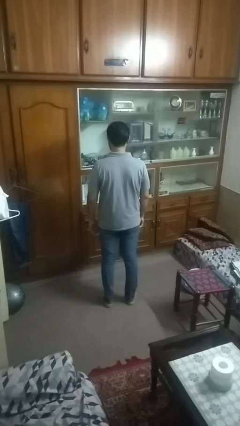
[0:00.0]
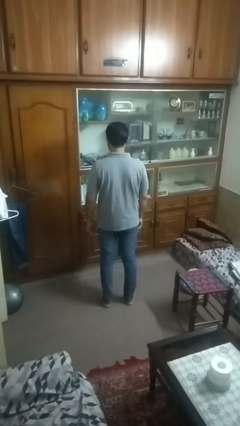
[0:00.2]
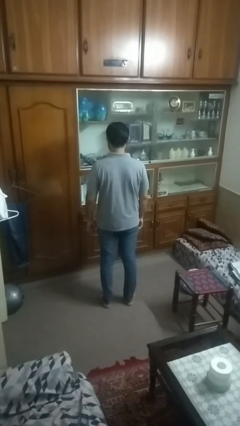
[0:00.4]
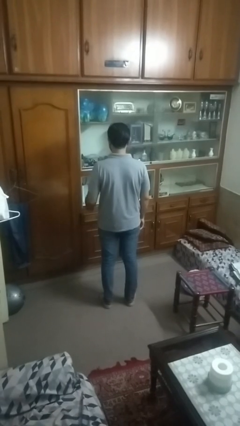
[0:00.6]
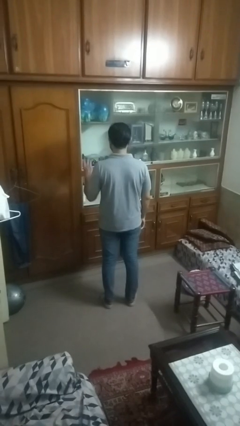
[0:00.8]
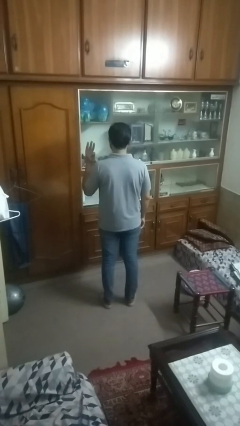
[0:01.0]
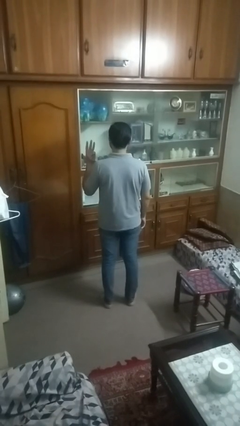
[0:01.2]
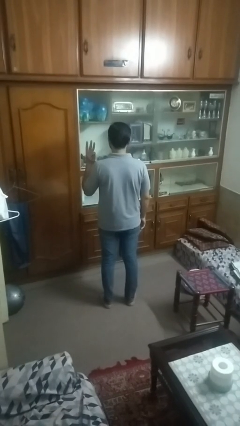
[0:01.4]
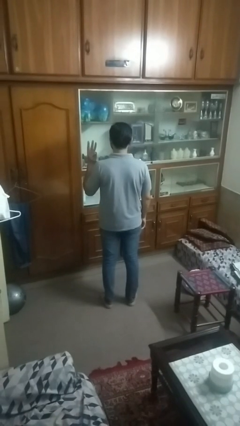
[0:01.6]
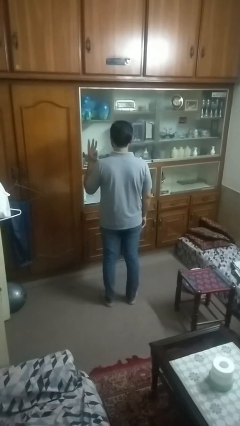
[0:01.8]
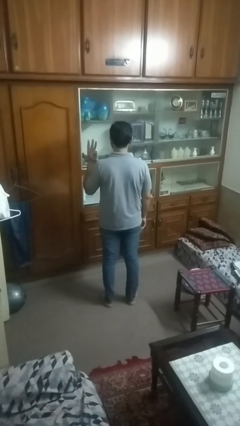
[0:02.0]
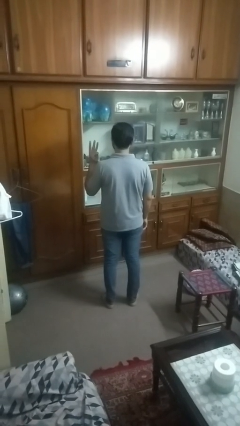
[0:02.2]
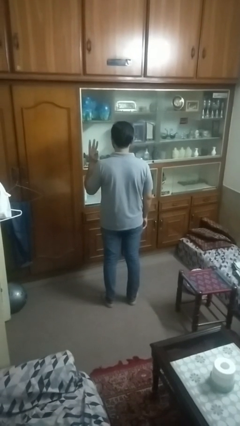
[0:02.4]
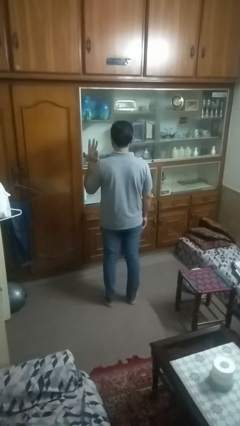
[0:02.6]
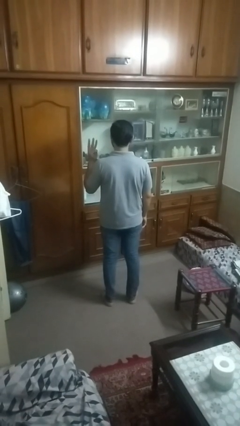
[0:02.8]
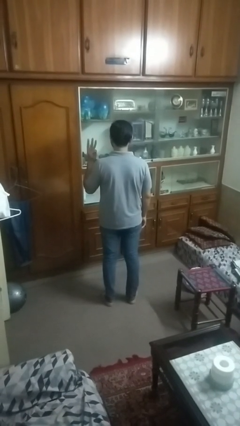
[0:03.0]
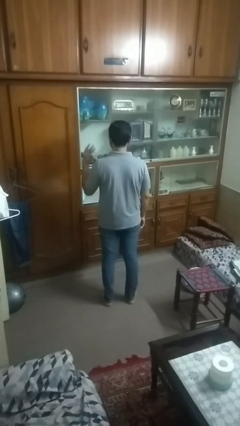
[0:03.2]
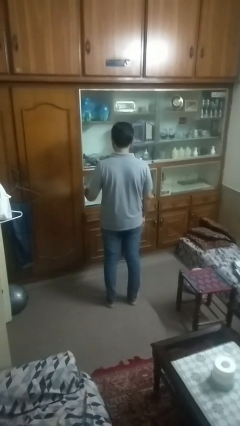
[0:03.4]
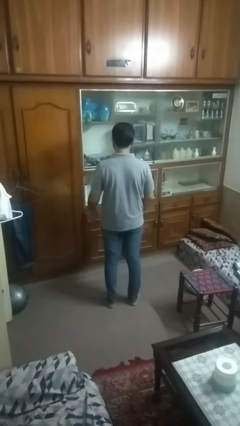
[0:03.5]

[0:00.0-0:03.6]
person gestures number three

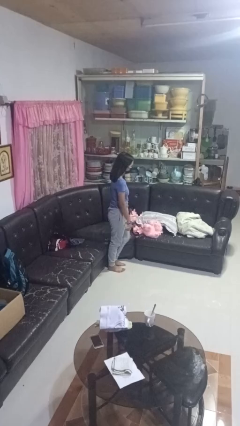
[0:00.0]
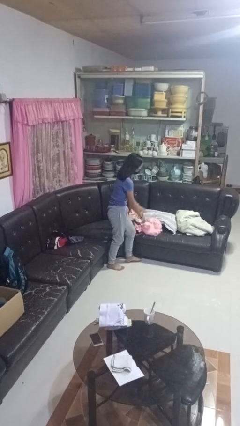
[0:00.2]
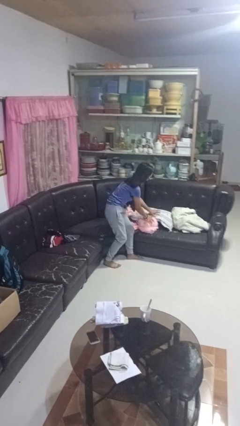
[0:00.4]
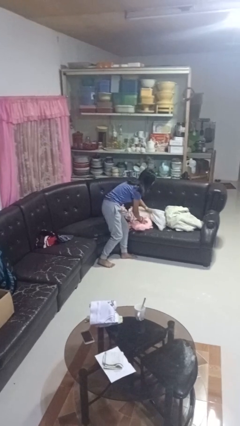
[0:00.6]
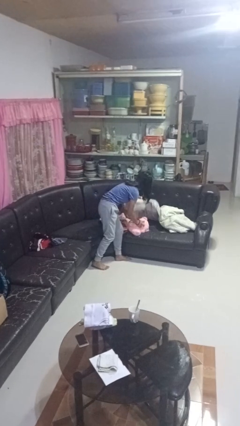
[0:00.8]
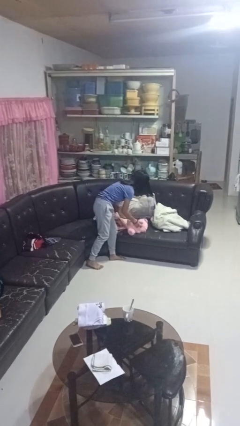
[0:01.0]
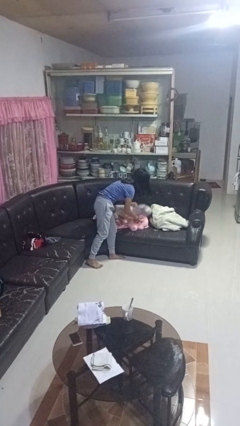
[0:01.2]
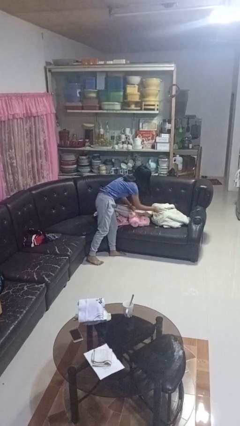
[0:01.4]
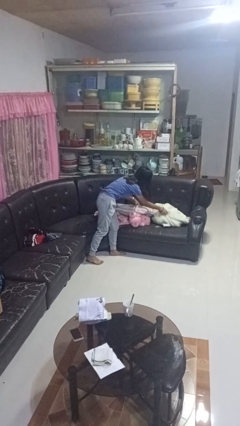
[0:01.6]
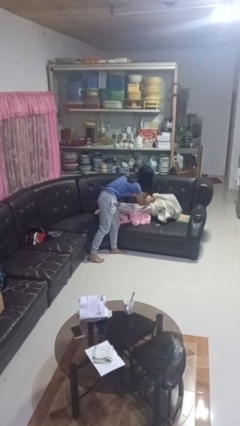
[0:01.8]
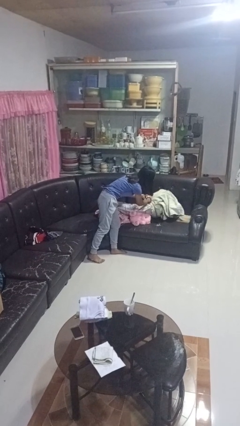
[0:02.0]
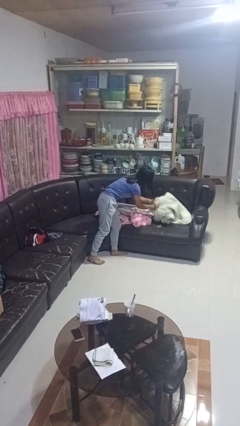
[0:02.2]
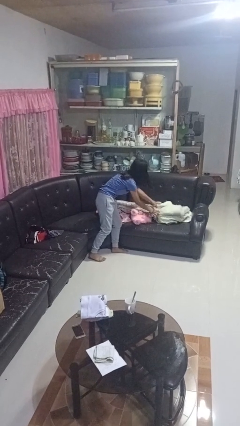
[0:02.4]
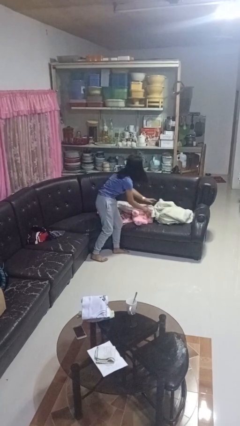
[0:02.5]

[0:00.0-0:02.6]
person searches in couch

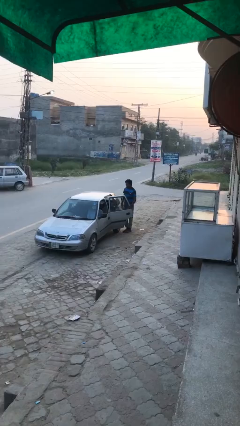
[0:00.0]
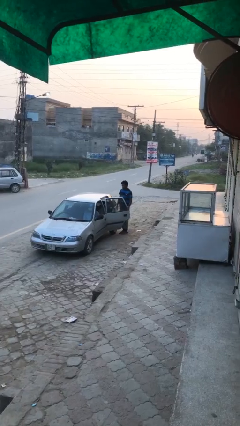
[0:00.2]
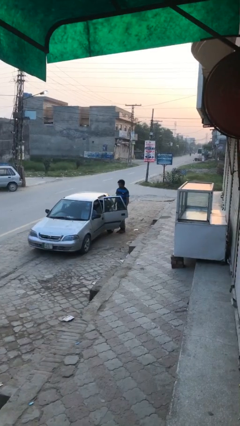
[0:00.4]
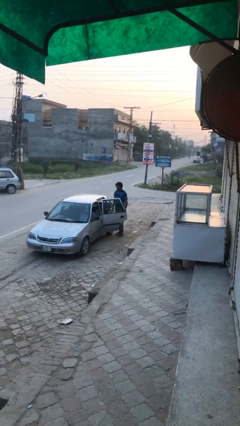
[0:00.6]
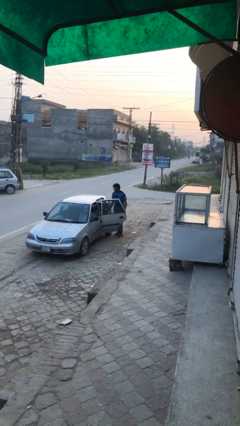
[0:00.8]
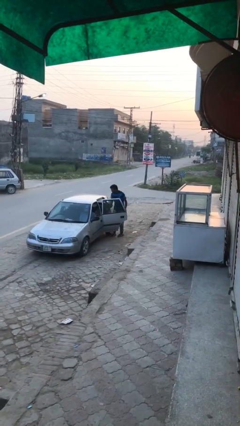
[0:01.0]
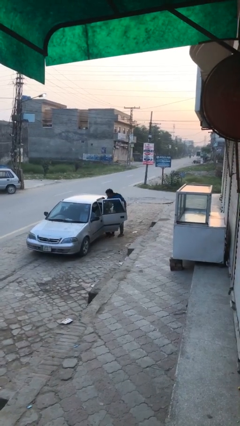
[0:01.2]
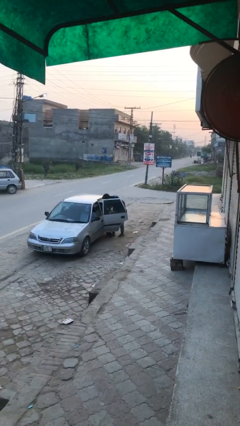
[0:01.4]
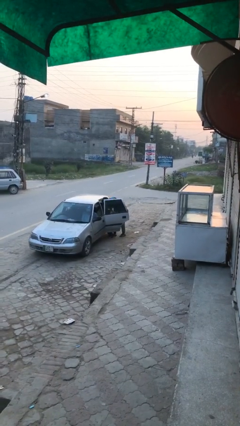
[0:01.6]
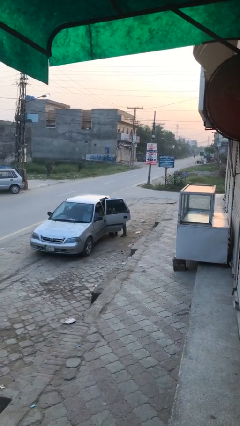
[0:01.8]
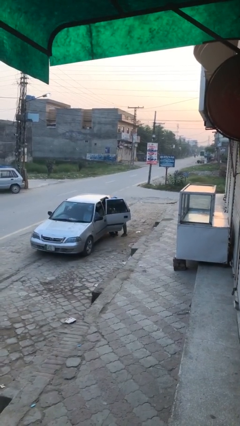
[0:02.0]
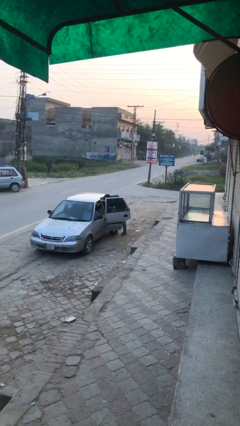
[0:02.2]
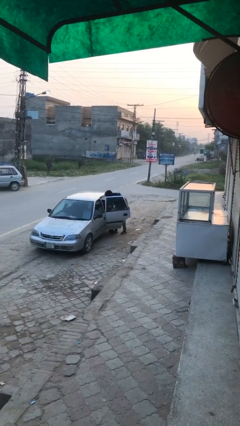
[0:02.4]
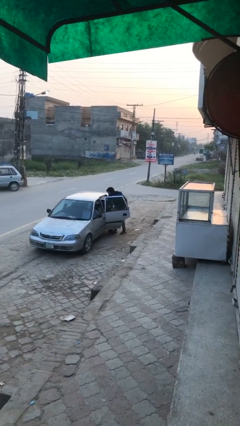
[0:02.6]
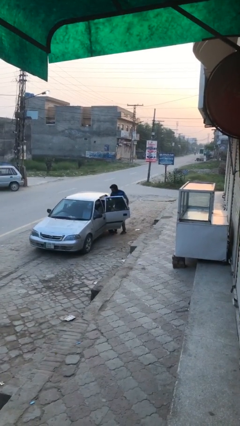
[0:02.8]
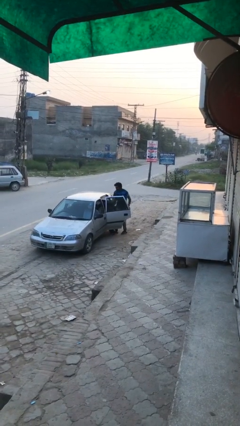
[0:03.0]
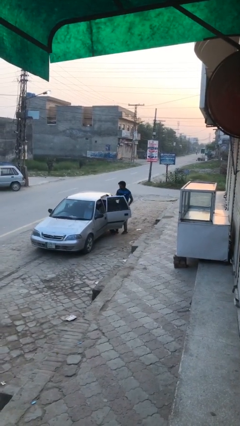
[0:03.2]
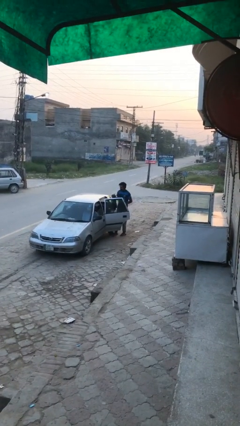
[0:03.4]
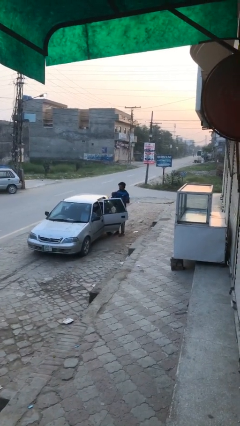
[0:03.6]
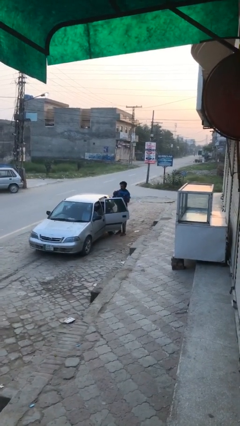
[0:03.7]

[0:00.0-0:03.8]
person unloads car

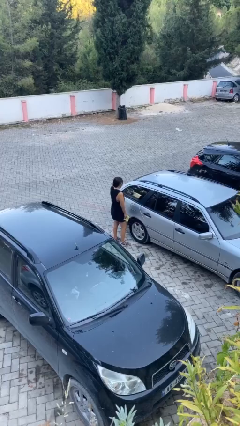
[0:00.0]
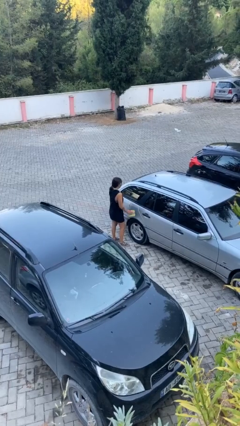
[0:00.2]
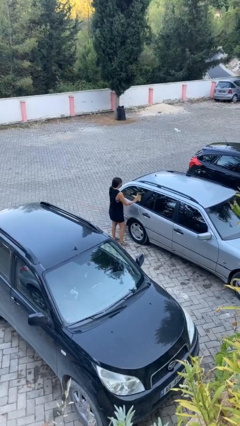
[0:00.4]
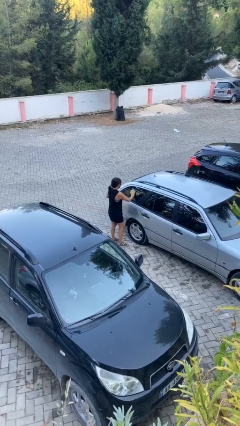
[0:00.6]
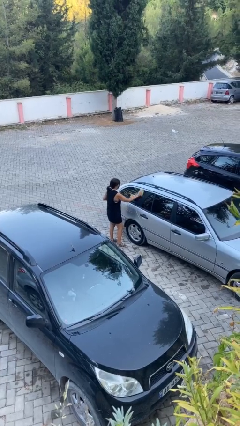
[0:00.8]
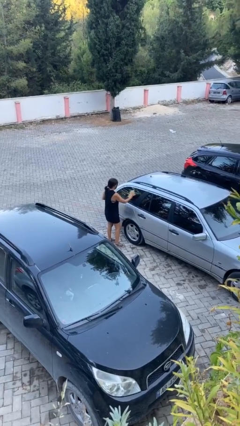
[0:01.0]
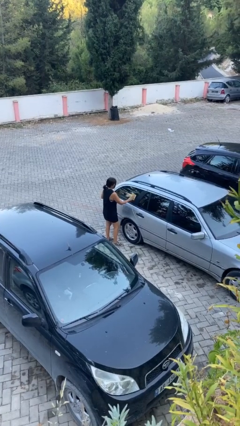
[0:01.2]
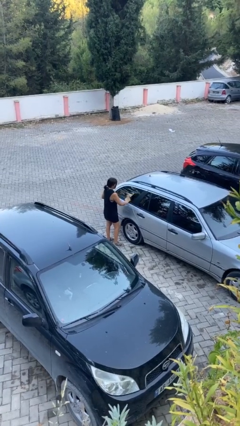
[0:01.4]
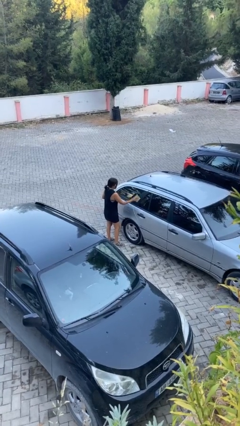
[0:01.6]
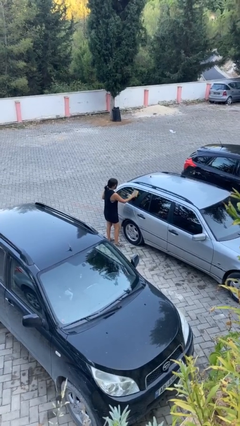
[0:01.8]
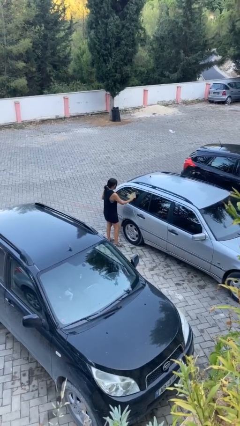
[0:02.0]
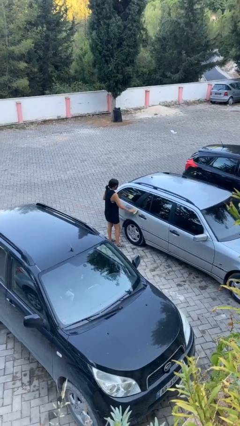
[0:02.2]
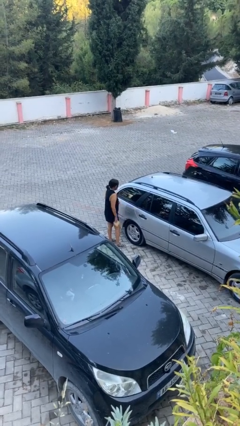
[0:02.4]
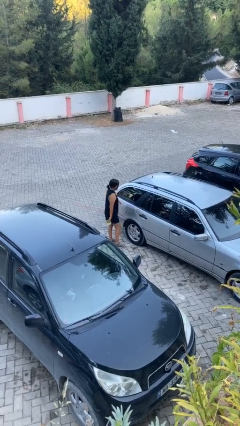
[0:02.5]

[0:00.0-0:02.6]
person polishes car with rag

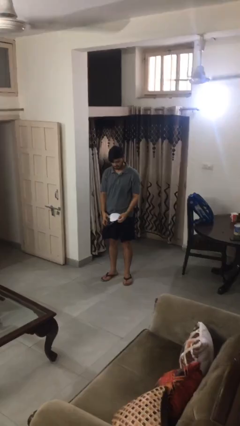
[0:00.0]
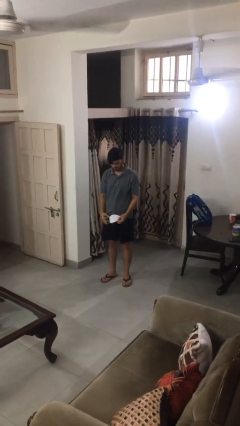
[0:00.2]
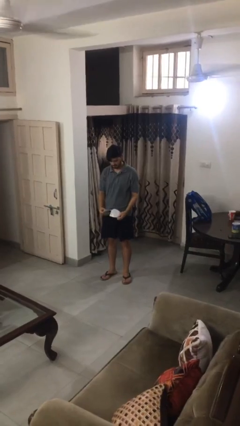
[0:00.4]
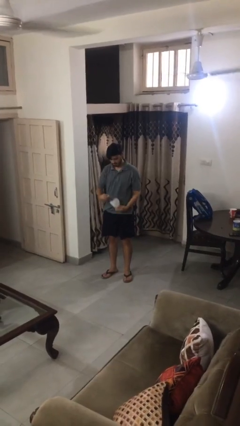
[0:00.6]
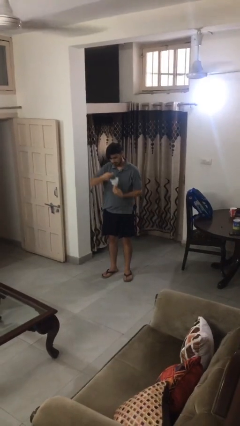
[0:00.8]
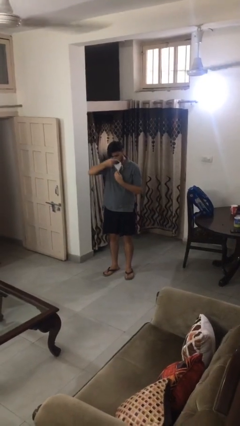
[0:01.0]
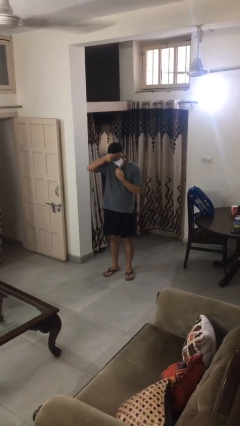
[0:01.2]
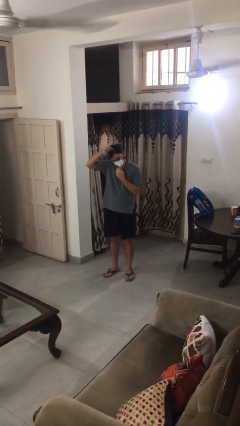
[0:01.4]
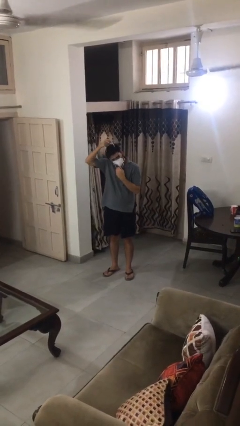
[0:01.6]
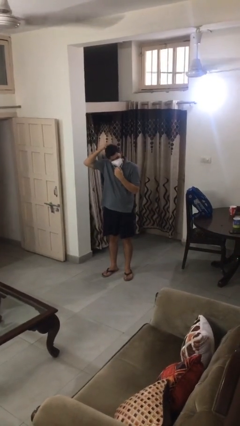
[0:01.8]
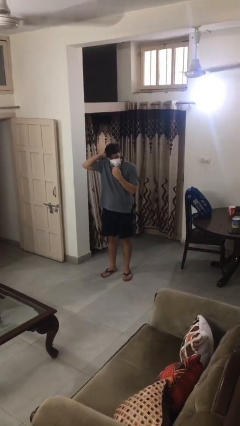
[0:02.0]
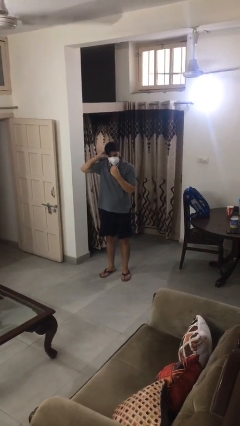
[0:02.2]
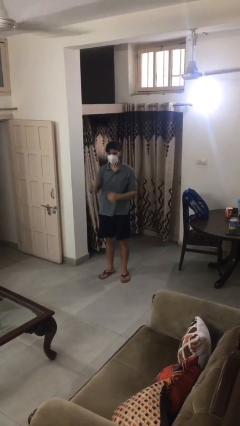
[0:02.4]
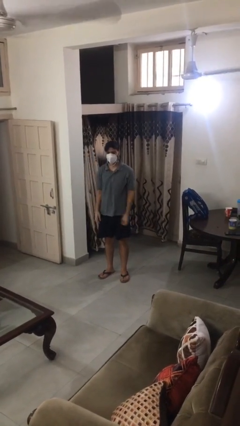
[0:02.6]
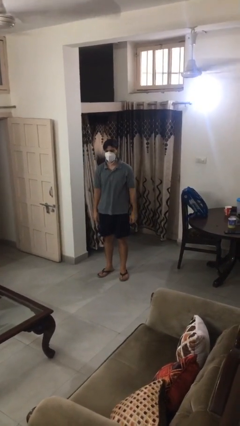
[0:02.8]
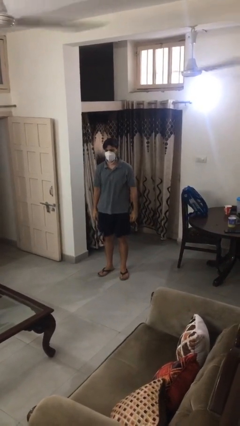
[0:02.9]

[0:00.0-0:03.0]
person puts on facemask

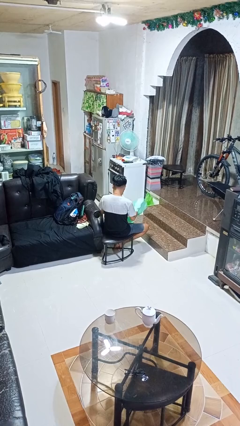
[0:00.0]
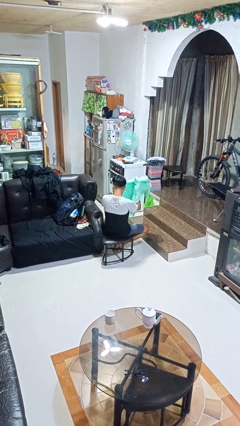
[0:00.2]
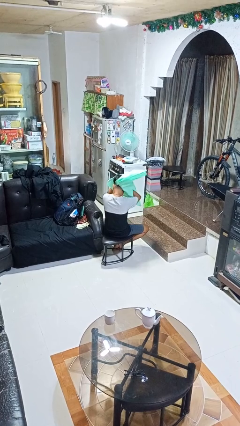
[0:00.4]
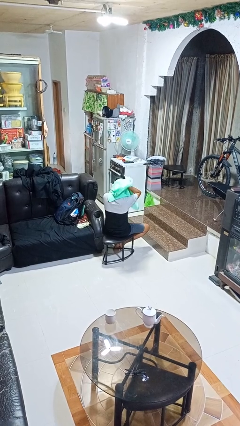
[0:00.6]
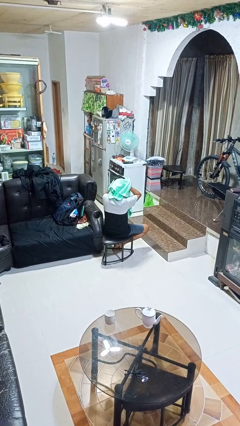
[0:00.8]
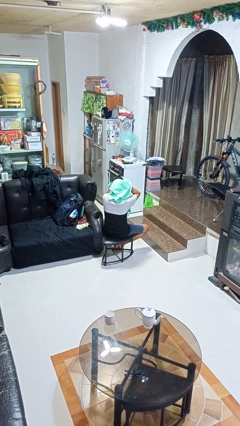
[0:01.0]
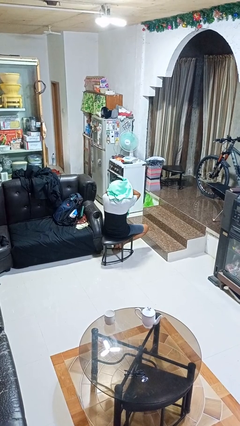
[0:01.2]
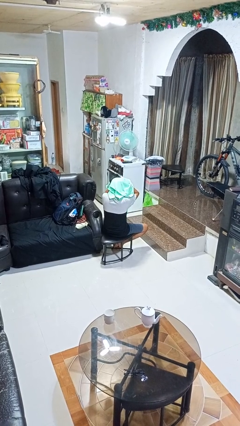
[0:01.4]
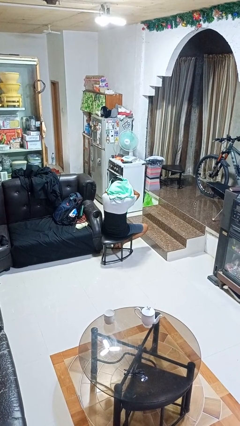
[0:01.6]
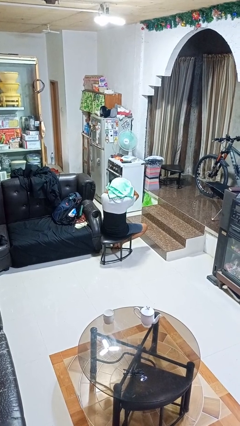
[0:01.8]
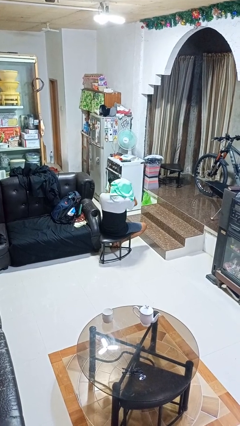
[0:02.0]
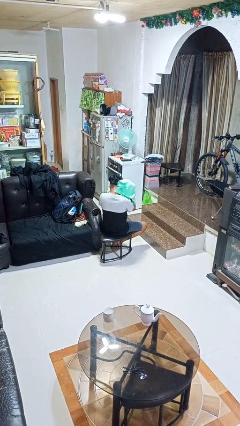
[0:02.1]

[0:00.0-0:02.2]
person dries hair with towel
